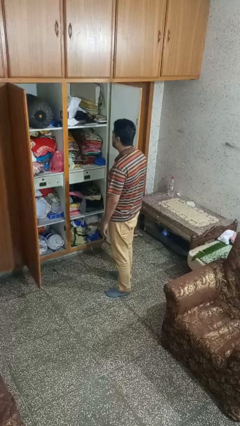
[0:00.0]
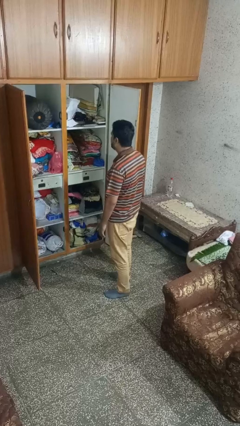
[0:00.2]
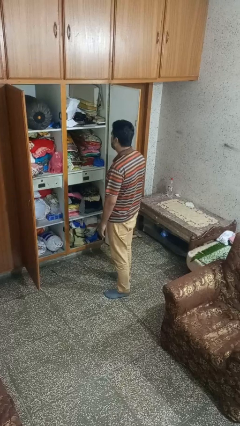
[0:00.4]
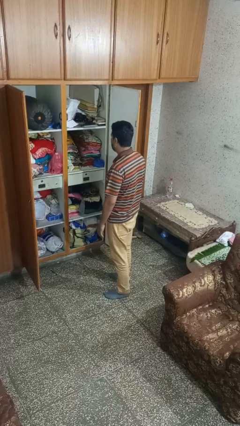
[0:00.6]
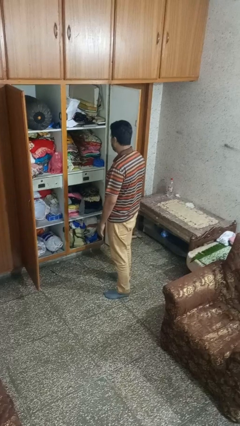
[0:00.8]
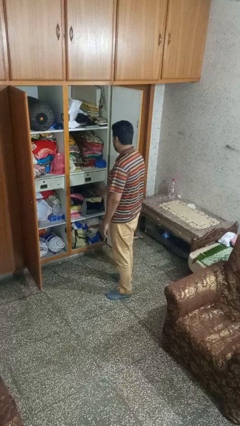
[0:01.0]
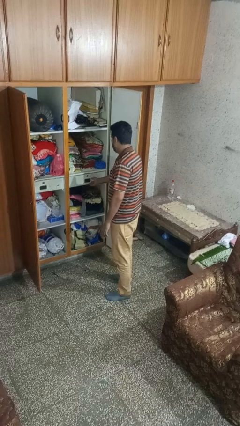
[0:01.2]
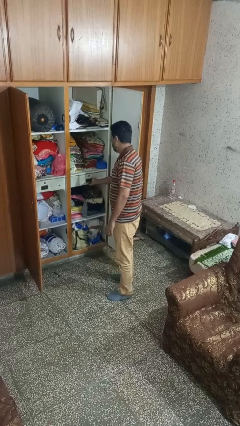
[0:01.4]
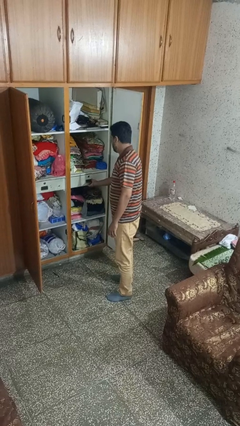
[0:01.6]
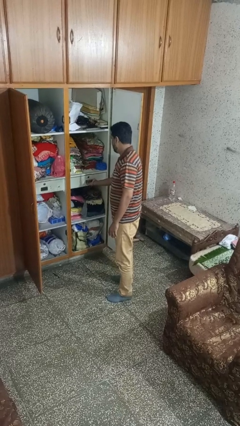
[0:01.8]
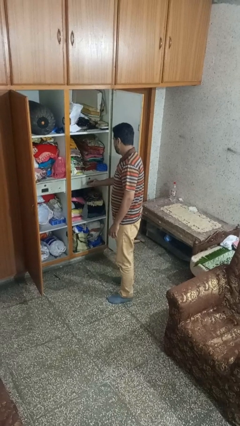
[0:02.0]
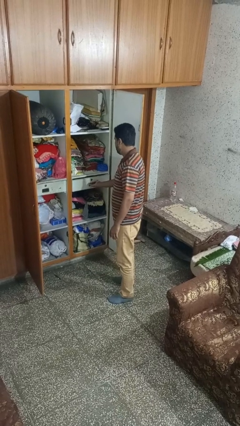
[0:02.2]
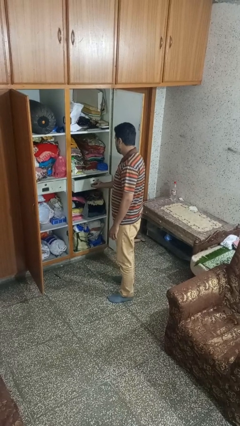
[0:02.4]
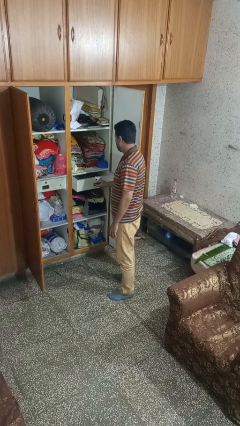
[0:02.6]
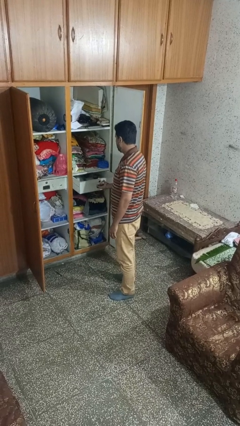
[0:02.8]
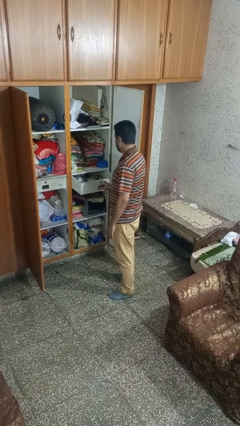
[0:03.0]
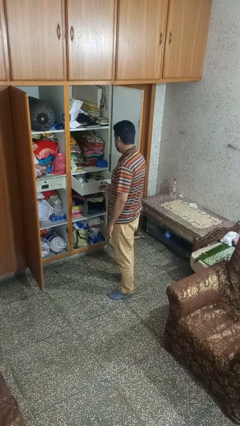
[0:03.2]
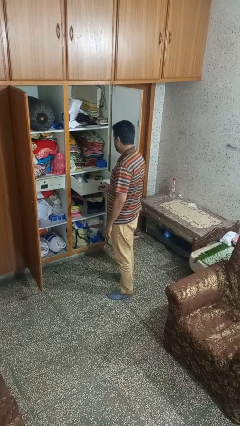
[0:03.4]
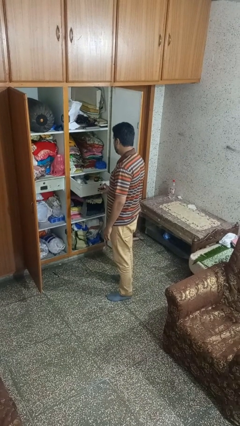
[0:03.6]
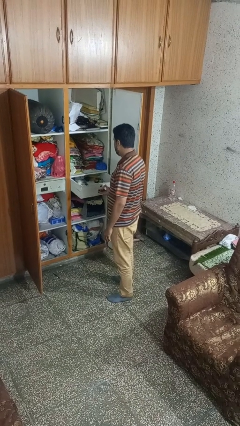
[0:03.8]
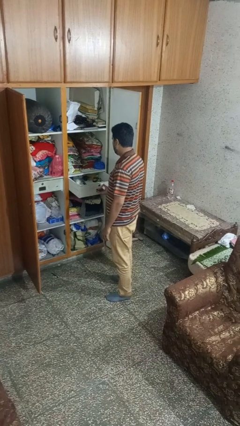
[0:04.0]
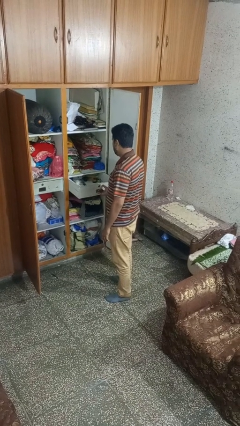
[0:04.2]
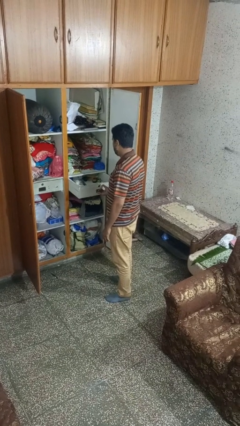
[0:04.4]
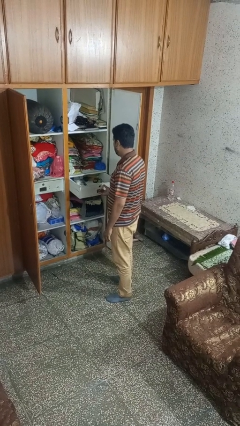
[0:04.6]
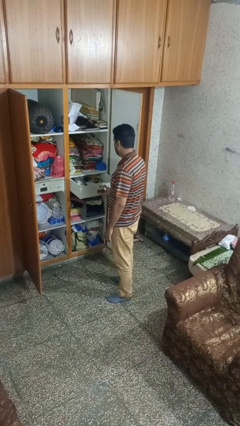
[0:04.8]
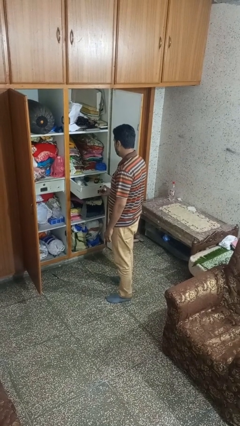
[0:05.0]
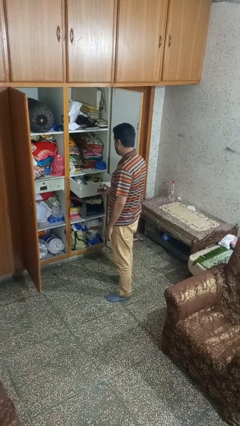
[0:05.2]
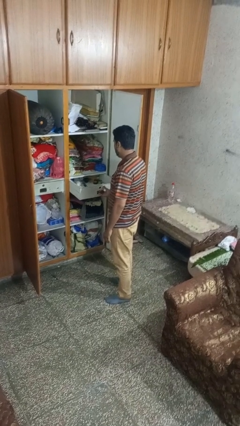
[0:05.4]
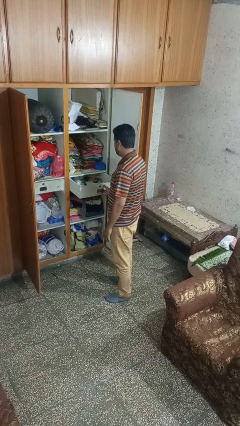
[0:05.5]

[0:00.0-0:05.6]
person opens dresser drawer

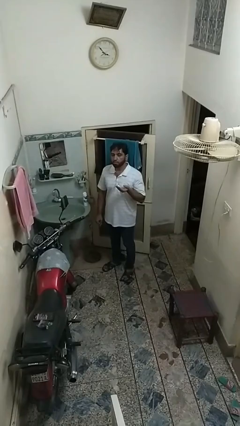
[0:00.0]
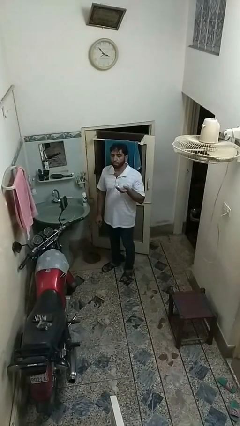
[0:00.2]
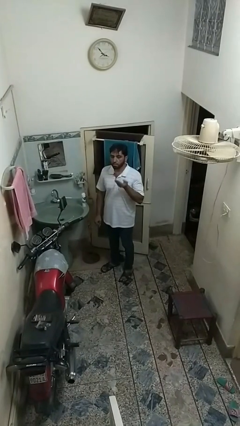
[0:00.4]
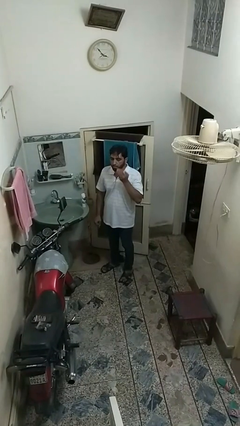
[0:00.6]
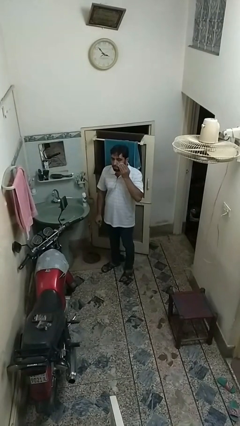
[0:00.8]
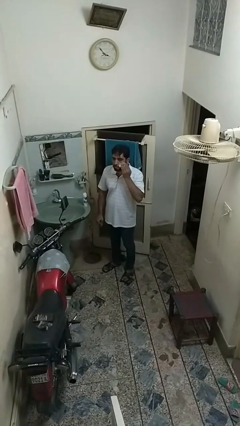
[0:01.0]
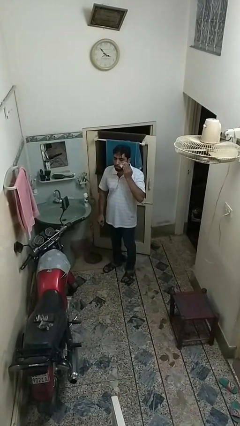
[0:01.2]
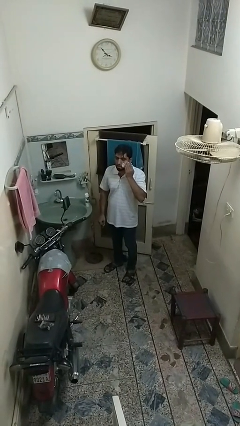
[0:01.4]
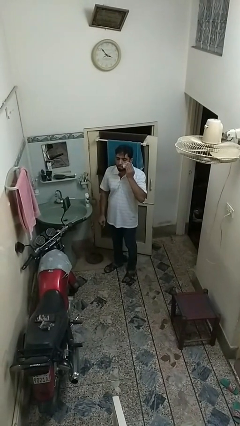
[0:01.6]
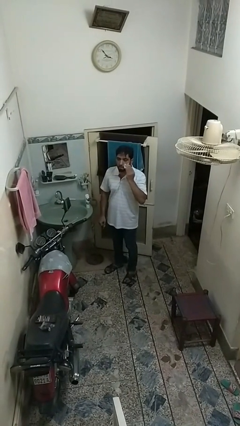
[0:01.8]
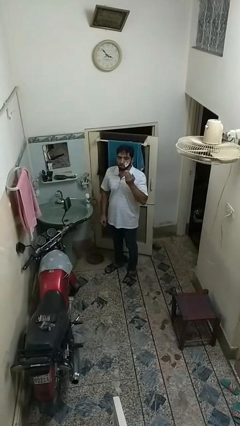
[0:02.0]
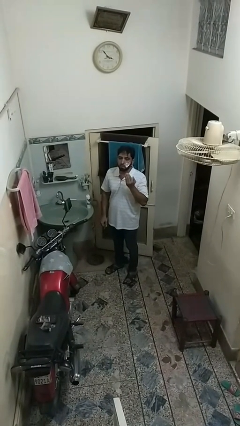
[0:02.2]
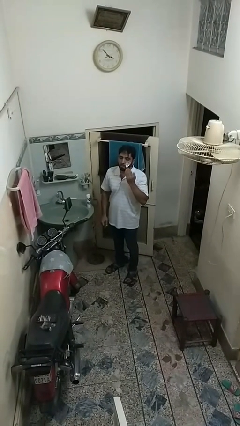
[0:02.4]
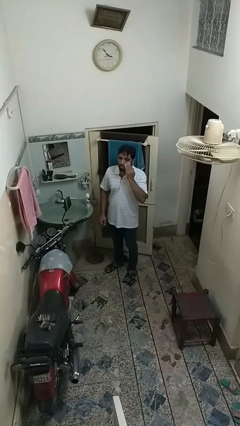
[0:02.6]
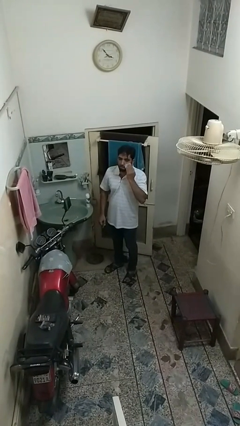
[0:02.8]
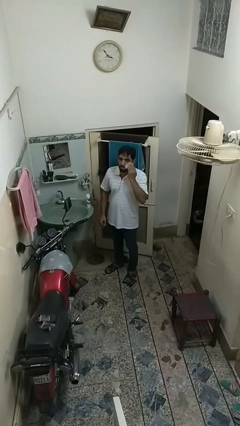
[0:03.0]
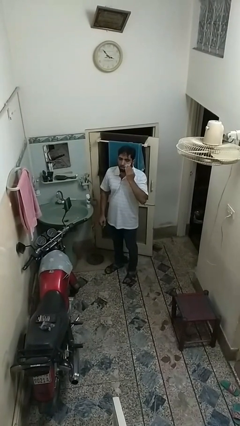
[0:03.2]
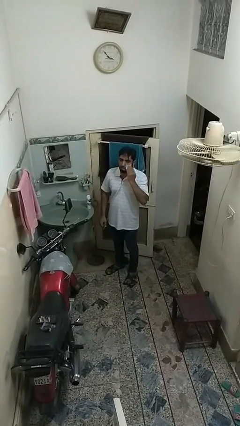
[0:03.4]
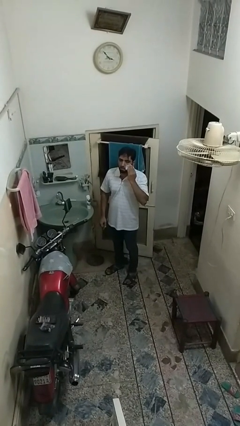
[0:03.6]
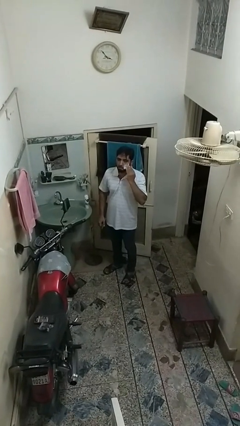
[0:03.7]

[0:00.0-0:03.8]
person applies shaving cream

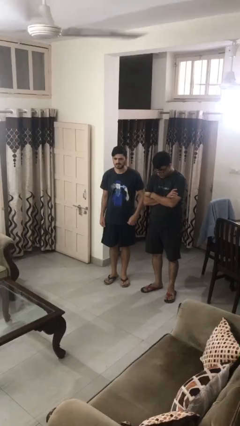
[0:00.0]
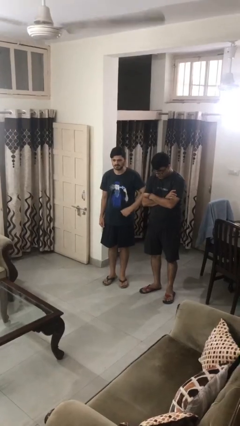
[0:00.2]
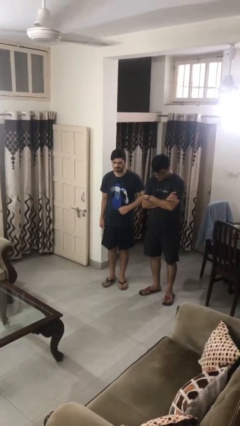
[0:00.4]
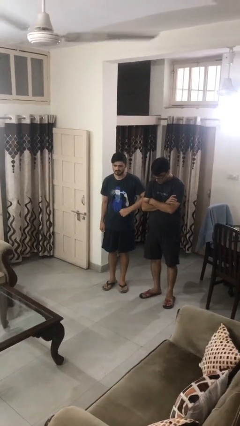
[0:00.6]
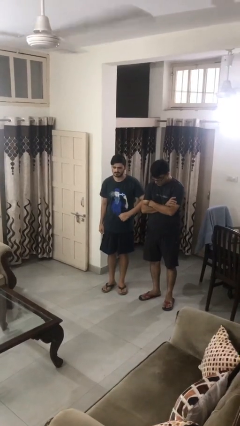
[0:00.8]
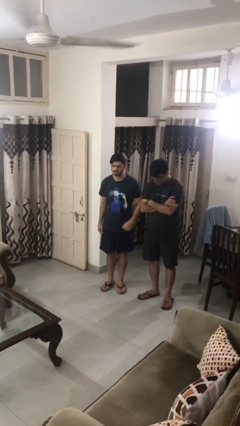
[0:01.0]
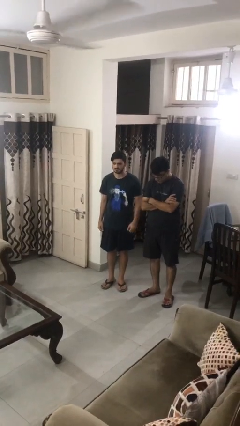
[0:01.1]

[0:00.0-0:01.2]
person nudges person with elbow

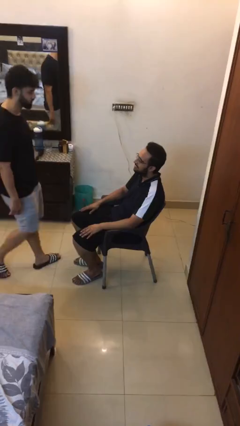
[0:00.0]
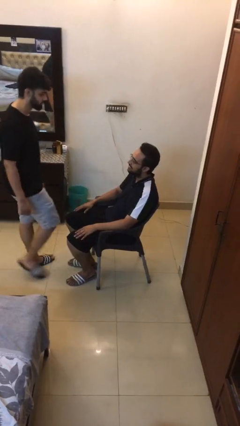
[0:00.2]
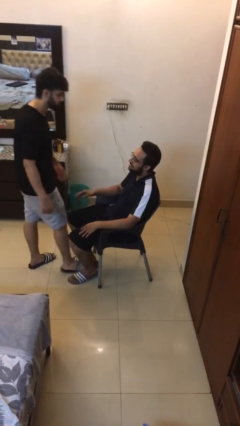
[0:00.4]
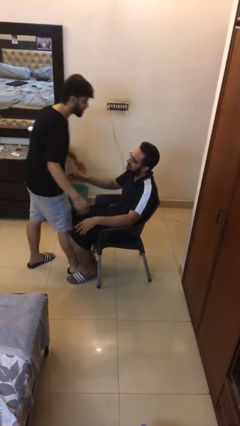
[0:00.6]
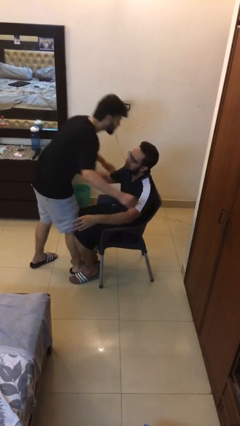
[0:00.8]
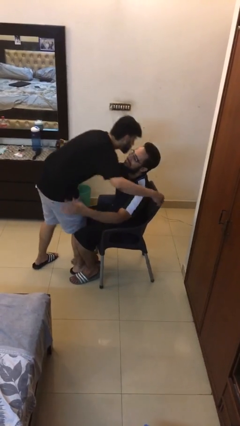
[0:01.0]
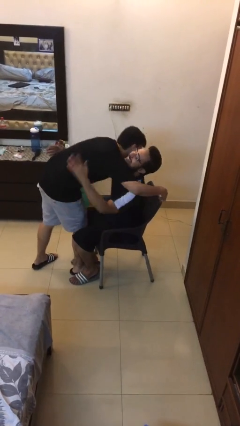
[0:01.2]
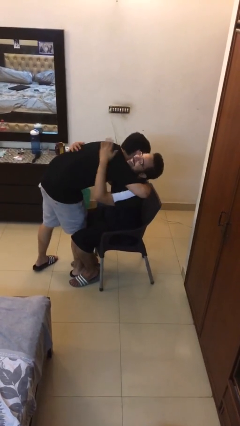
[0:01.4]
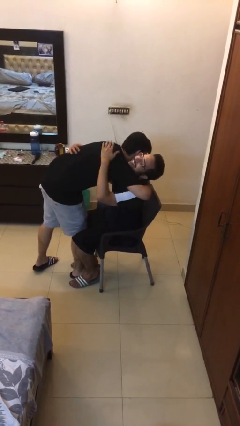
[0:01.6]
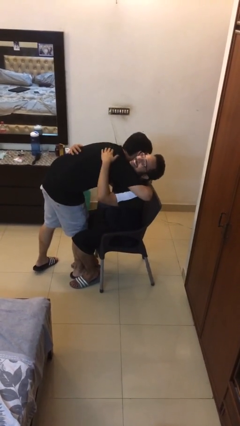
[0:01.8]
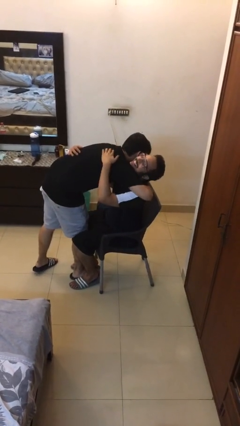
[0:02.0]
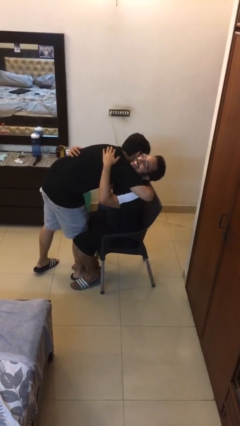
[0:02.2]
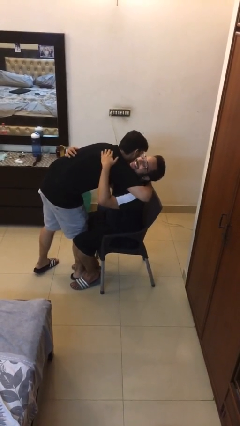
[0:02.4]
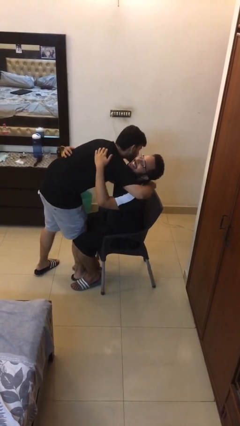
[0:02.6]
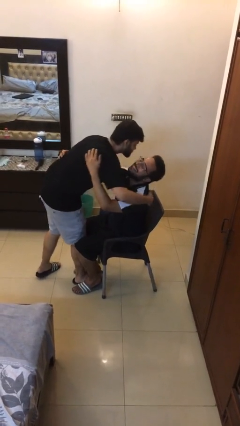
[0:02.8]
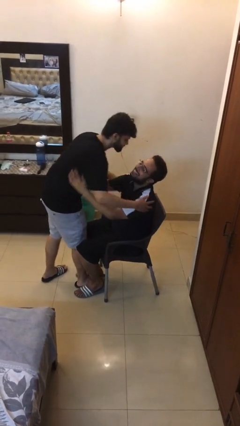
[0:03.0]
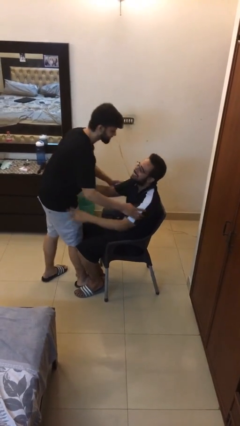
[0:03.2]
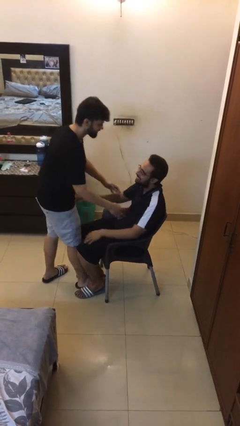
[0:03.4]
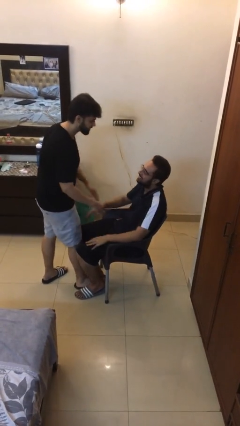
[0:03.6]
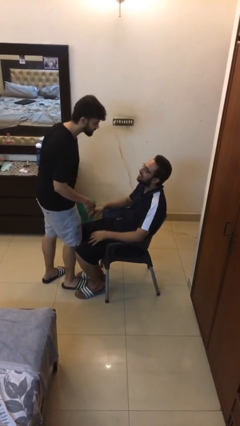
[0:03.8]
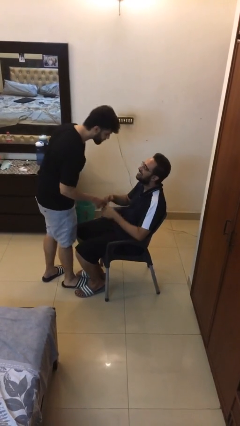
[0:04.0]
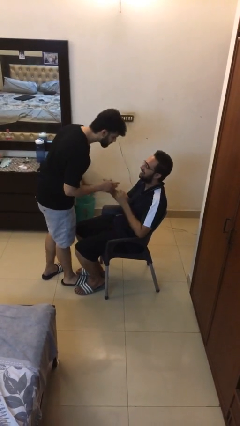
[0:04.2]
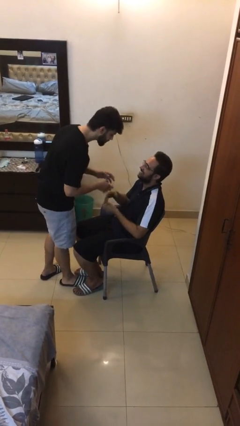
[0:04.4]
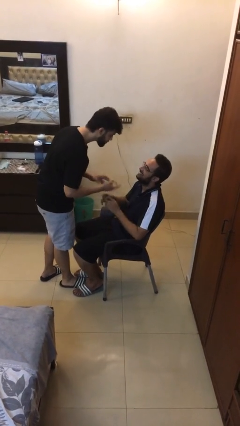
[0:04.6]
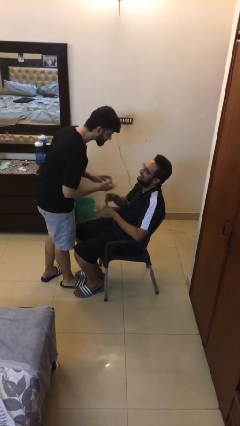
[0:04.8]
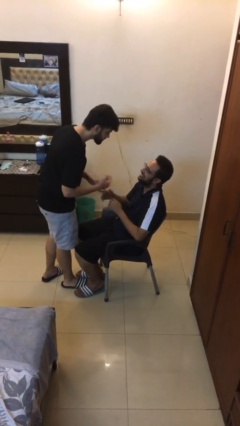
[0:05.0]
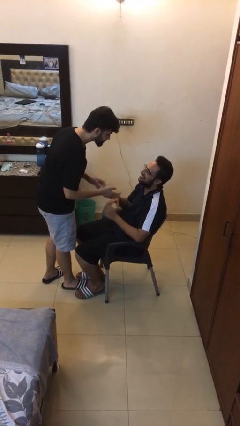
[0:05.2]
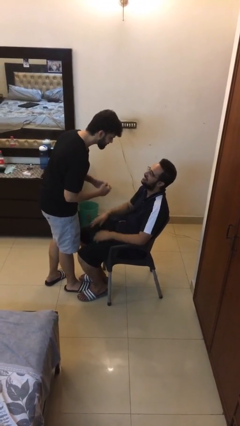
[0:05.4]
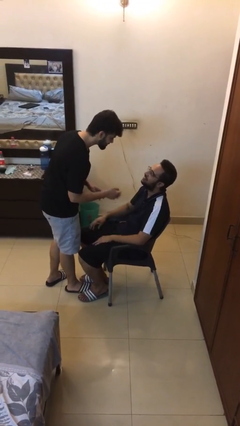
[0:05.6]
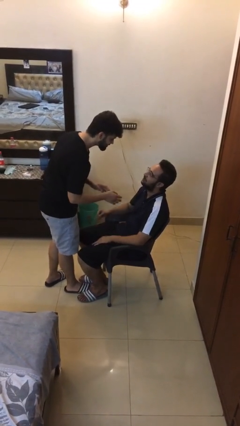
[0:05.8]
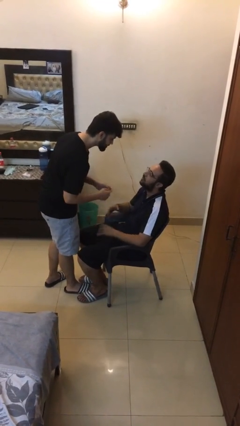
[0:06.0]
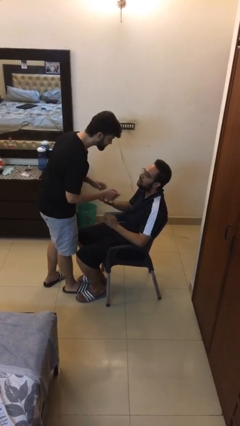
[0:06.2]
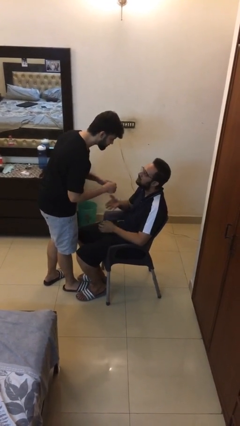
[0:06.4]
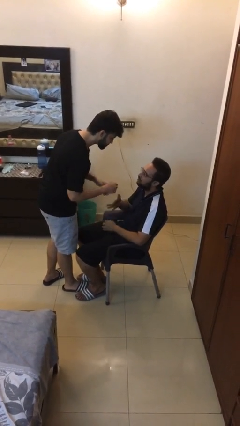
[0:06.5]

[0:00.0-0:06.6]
person embraces person

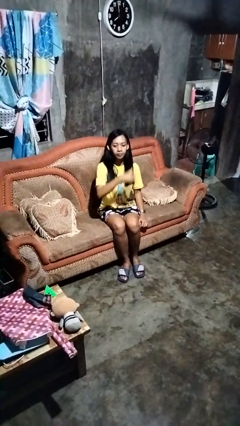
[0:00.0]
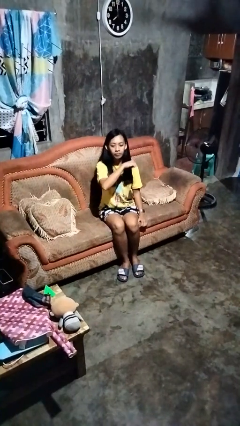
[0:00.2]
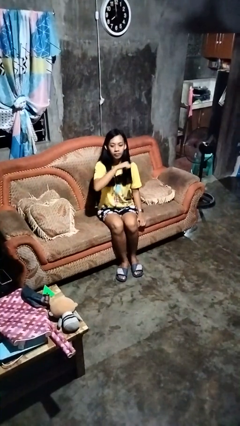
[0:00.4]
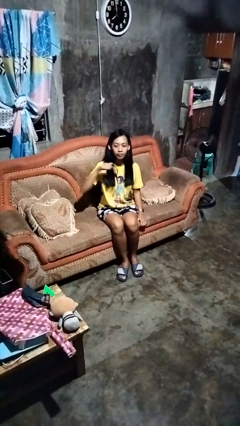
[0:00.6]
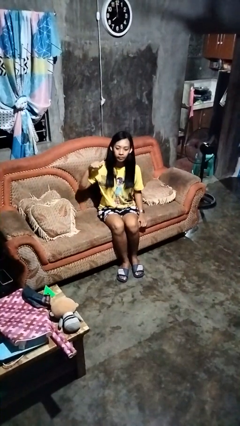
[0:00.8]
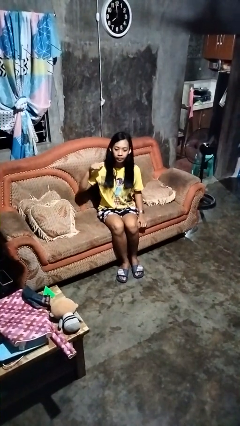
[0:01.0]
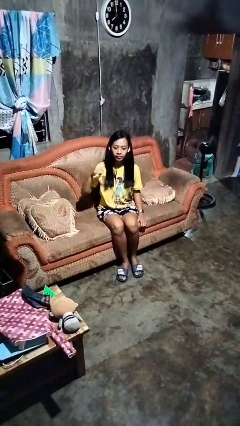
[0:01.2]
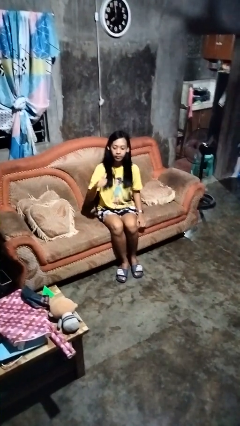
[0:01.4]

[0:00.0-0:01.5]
person gestures cut
